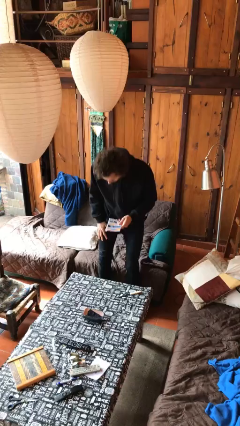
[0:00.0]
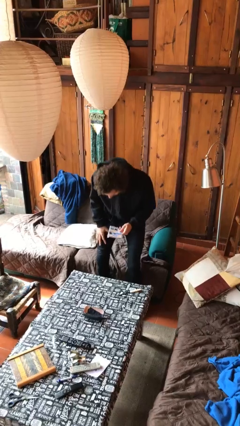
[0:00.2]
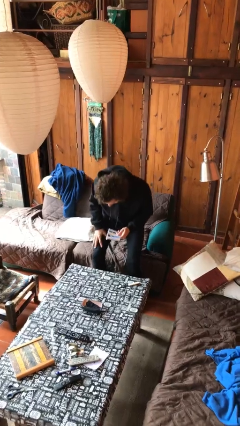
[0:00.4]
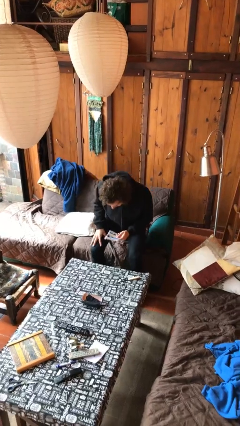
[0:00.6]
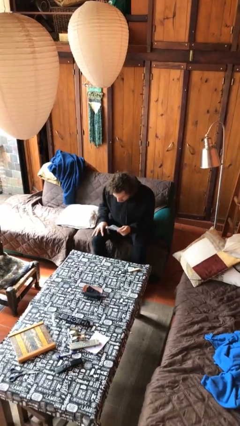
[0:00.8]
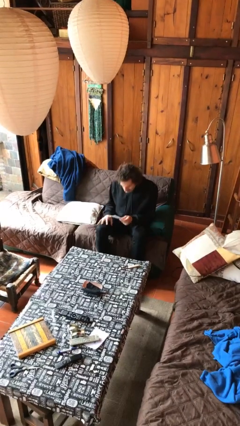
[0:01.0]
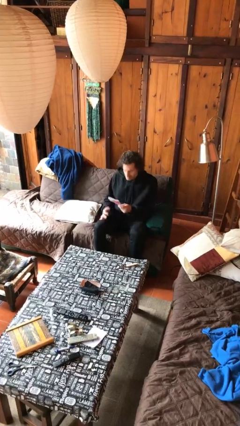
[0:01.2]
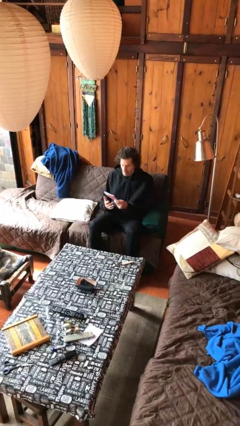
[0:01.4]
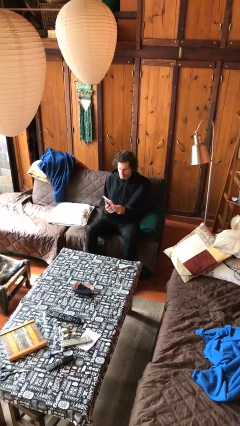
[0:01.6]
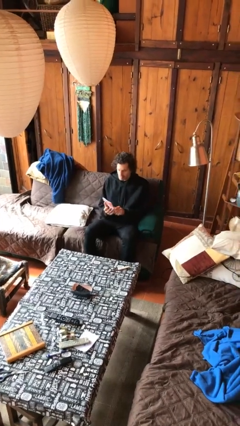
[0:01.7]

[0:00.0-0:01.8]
person sits down

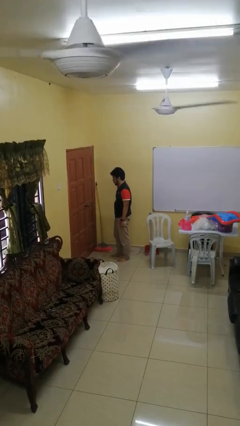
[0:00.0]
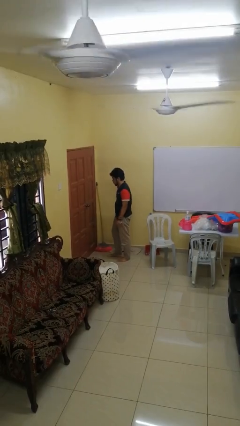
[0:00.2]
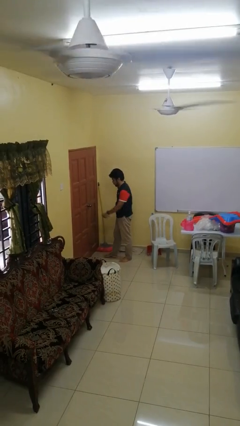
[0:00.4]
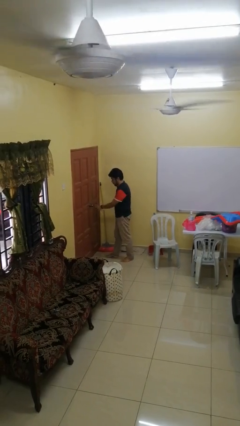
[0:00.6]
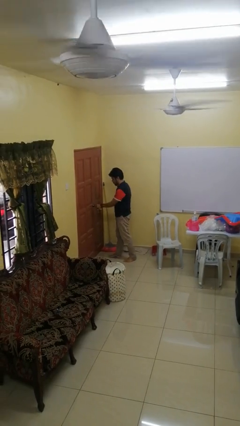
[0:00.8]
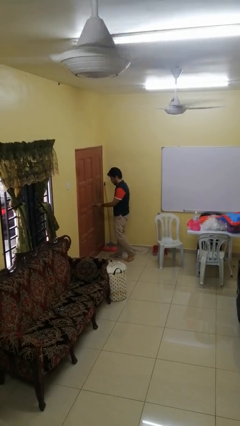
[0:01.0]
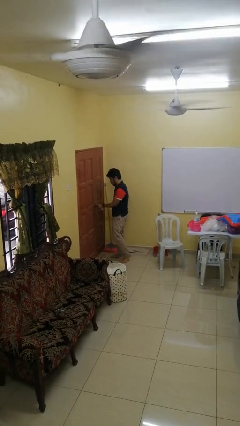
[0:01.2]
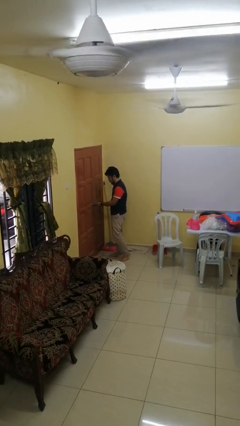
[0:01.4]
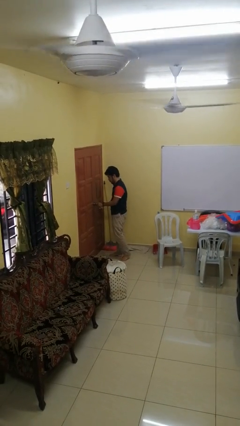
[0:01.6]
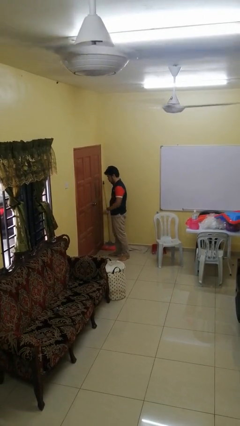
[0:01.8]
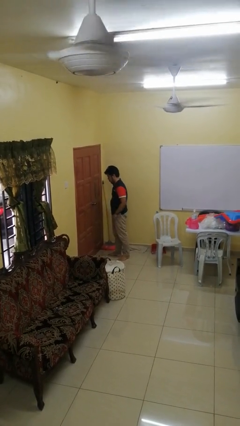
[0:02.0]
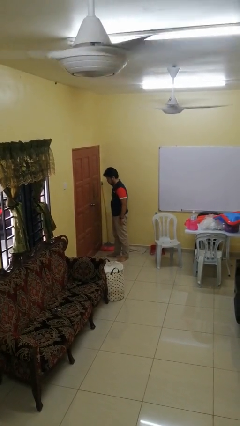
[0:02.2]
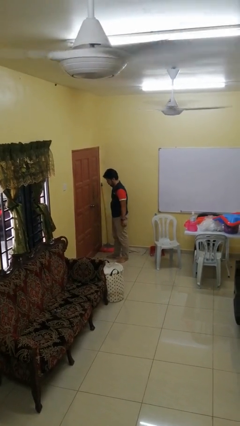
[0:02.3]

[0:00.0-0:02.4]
person unlocks door with keys

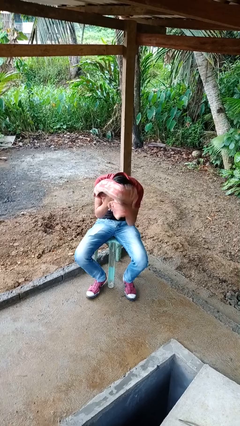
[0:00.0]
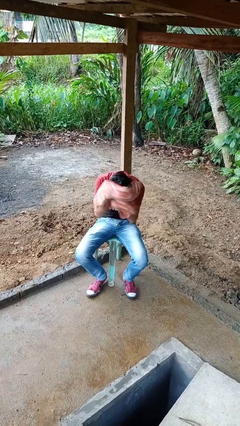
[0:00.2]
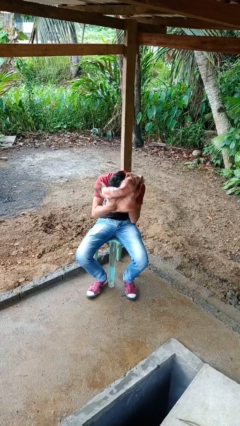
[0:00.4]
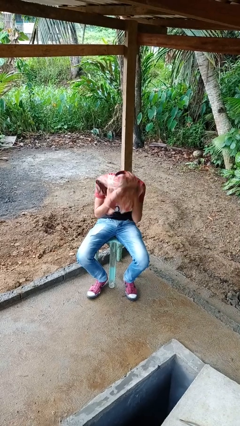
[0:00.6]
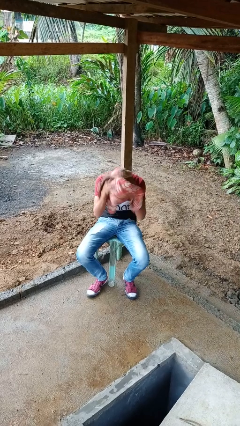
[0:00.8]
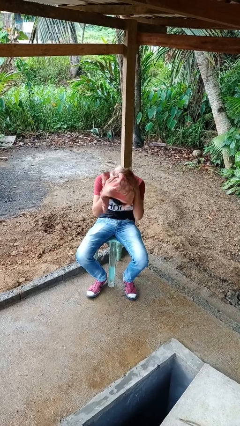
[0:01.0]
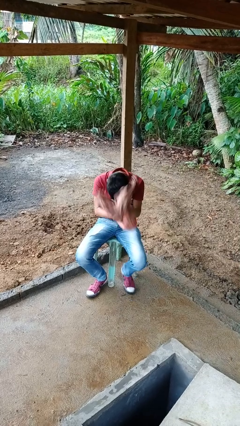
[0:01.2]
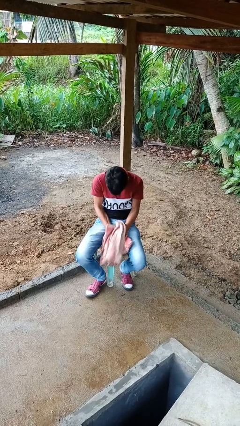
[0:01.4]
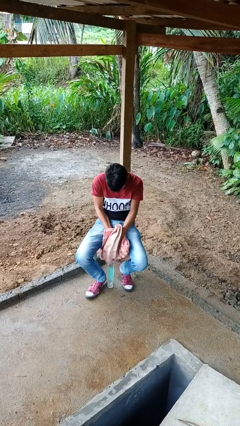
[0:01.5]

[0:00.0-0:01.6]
person dries hair with towel

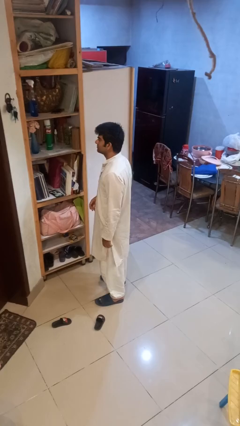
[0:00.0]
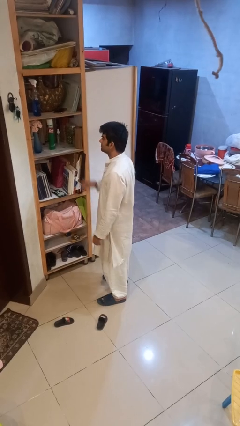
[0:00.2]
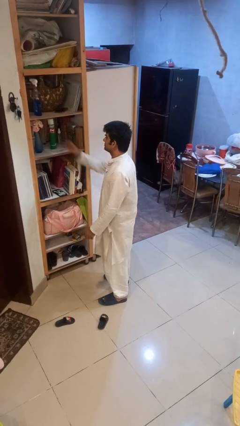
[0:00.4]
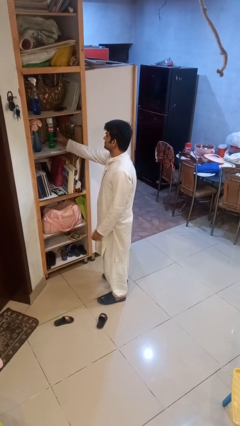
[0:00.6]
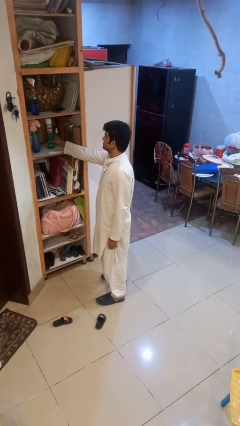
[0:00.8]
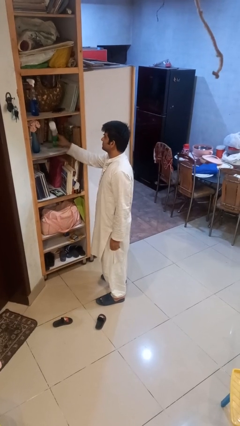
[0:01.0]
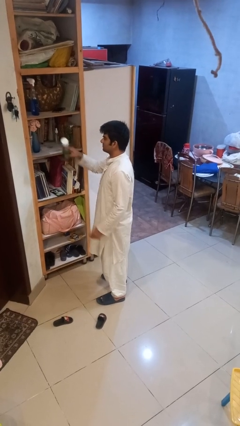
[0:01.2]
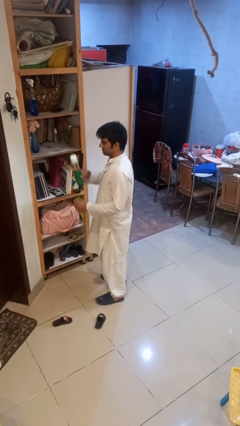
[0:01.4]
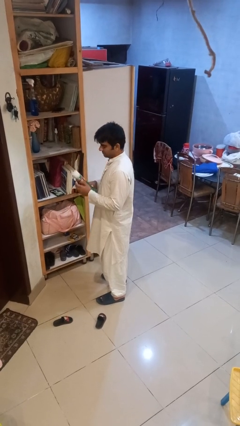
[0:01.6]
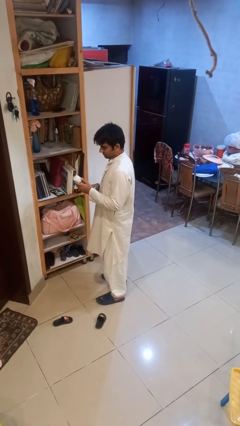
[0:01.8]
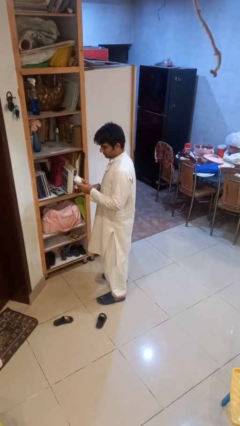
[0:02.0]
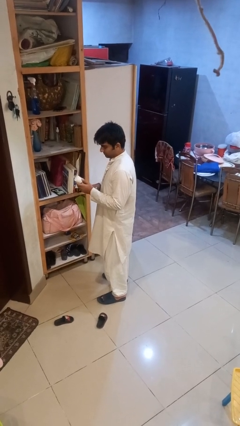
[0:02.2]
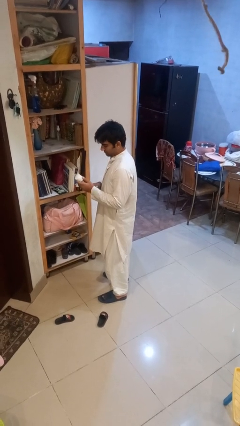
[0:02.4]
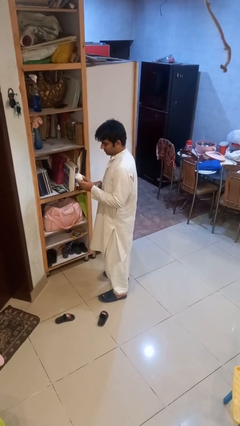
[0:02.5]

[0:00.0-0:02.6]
person picks up object from shelf

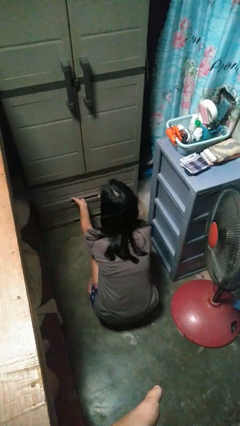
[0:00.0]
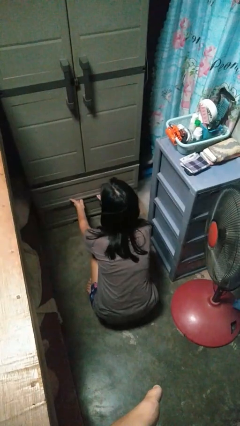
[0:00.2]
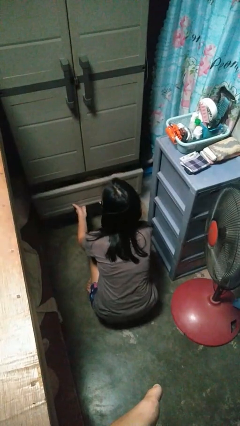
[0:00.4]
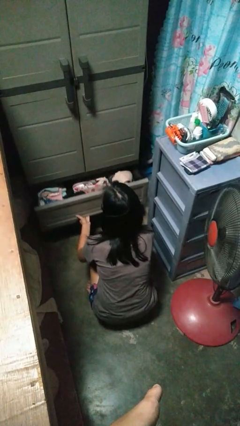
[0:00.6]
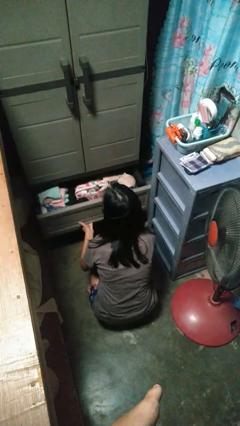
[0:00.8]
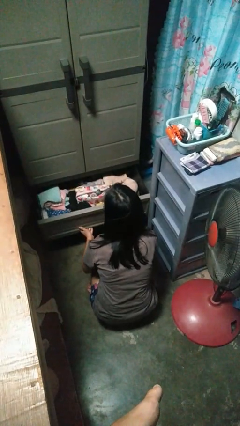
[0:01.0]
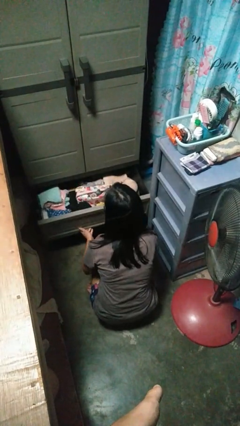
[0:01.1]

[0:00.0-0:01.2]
person opens dresser drawer

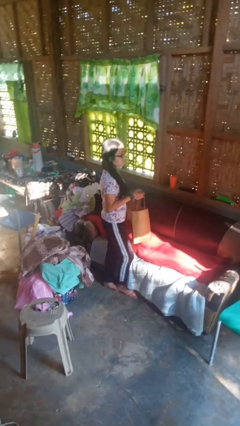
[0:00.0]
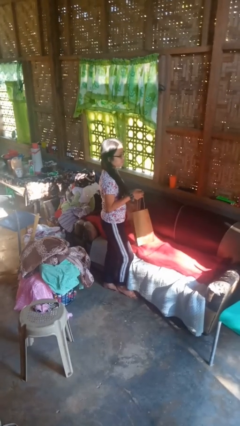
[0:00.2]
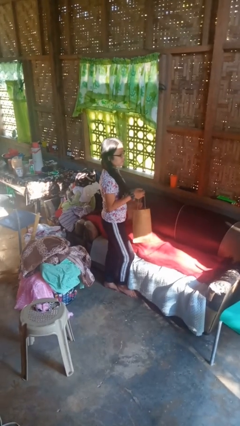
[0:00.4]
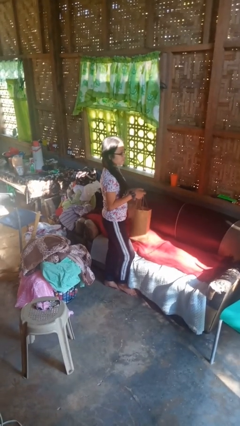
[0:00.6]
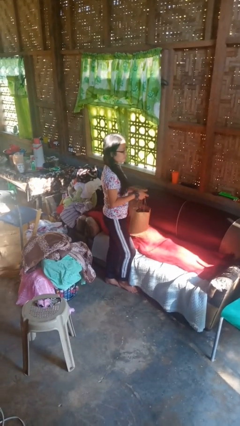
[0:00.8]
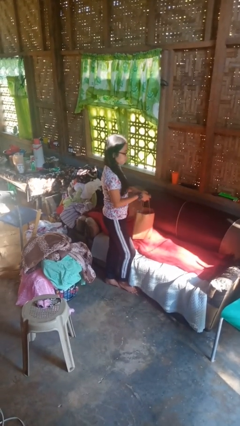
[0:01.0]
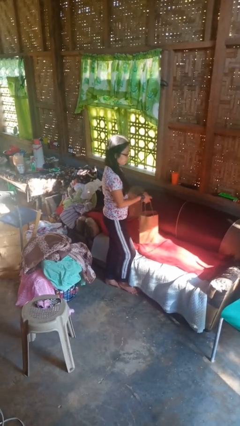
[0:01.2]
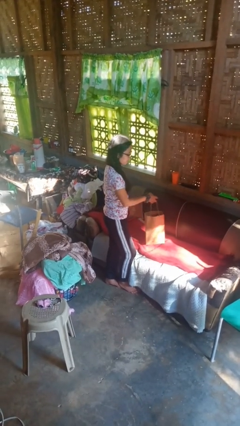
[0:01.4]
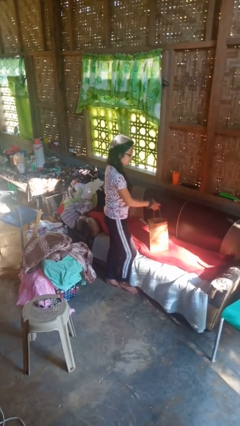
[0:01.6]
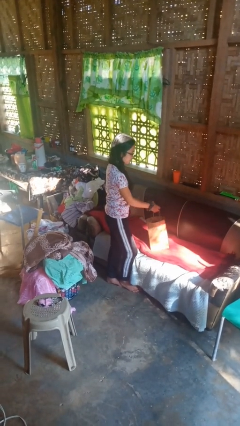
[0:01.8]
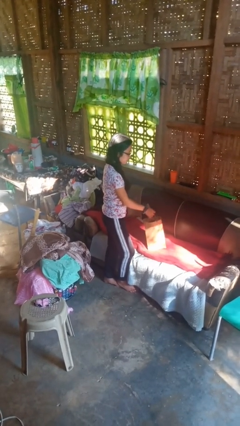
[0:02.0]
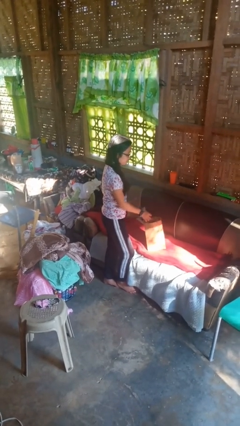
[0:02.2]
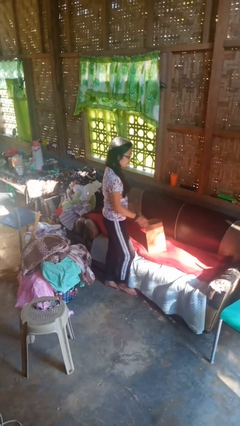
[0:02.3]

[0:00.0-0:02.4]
person puts down object on couch

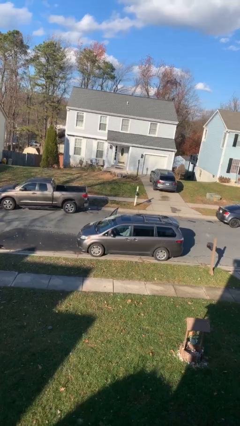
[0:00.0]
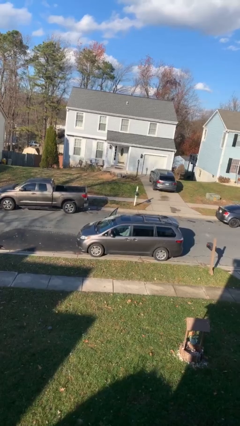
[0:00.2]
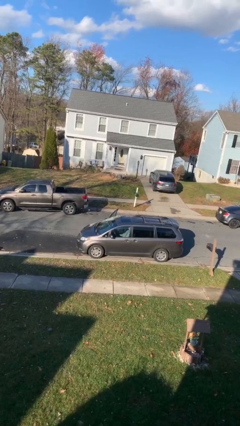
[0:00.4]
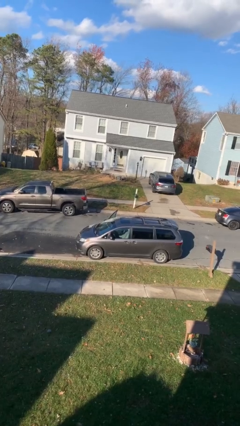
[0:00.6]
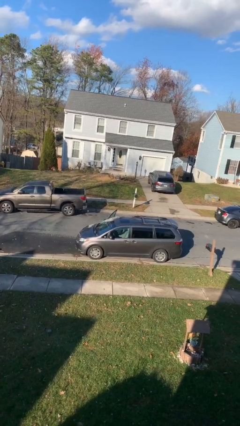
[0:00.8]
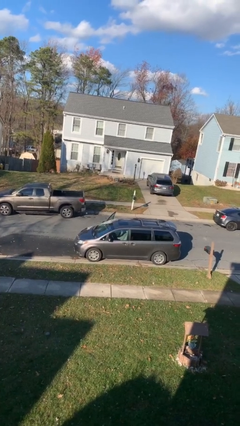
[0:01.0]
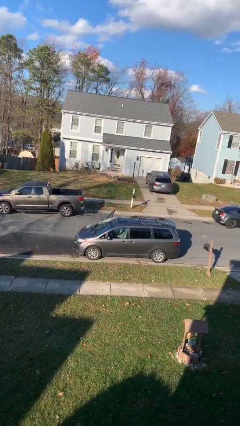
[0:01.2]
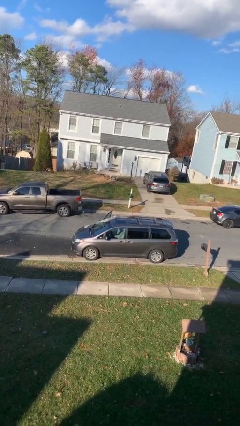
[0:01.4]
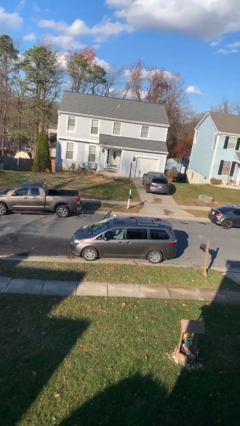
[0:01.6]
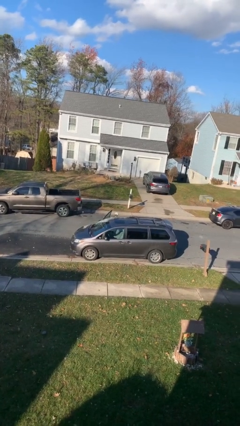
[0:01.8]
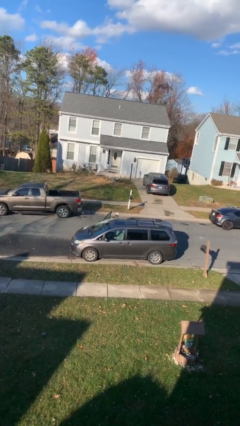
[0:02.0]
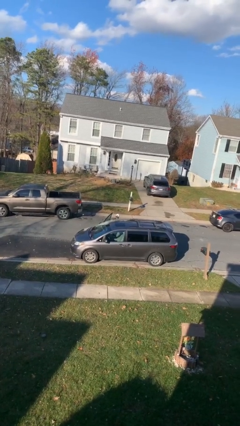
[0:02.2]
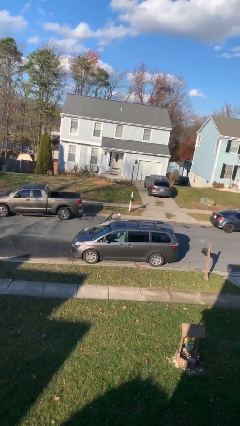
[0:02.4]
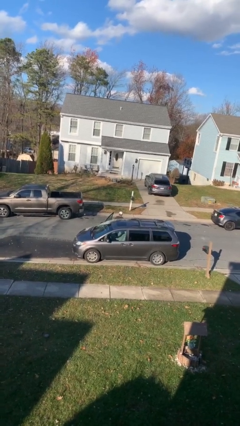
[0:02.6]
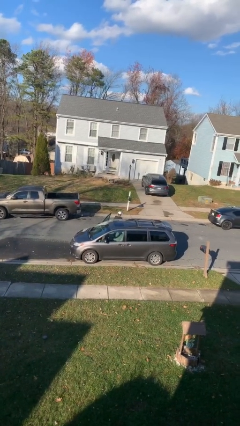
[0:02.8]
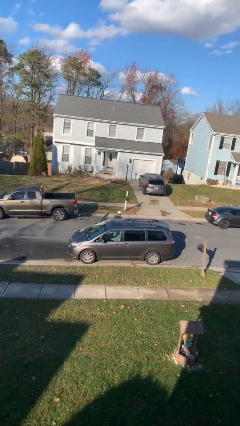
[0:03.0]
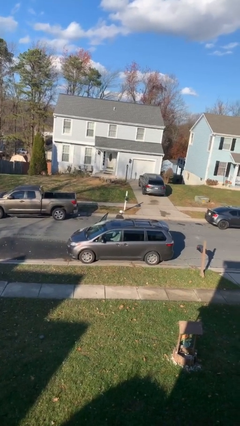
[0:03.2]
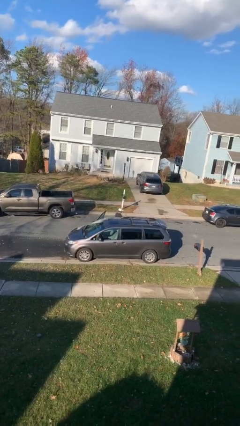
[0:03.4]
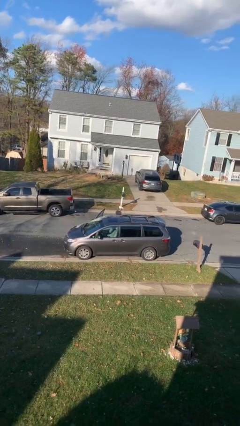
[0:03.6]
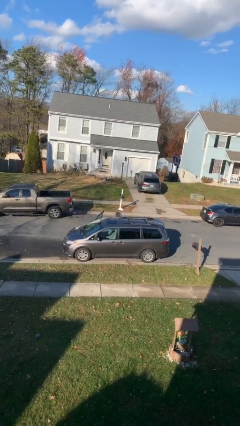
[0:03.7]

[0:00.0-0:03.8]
person exits car

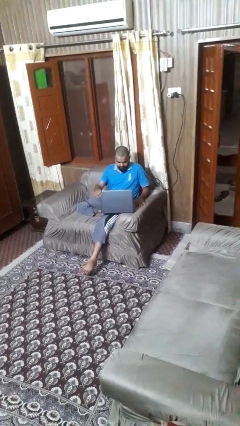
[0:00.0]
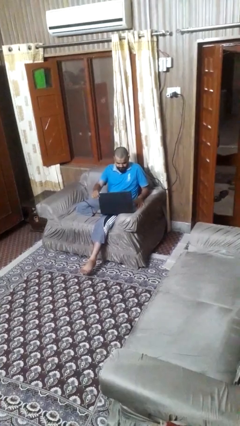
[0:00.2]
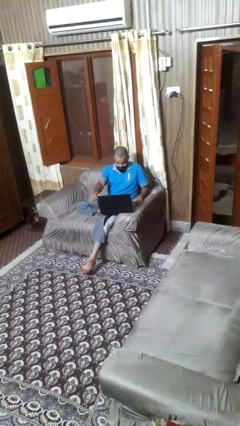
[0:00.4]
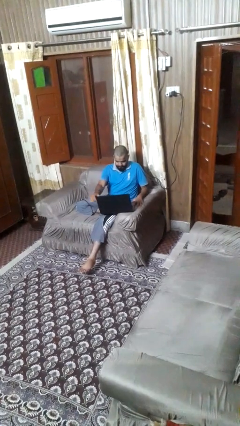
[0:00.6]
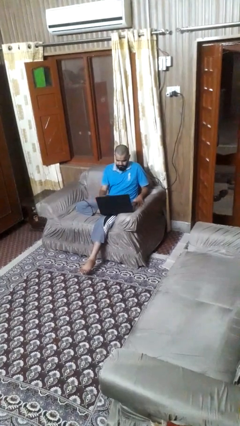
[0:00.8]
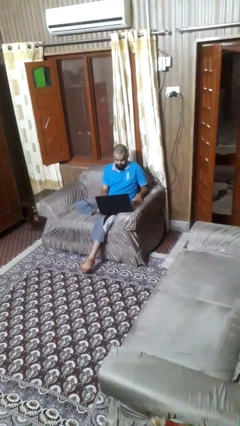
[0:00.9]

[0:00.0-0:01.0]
person opens laptop
